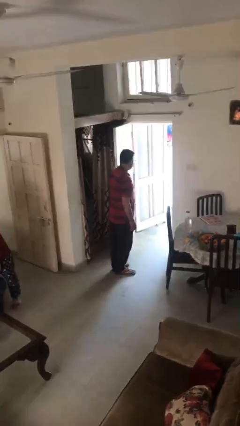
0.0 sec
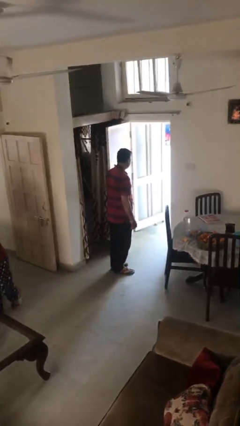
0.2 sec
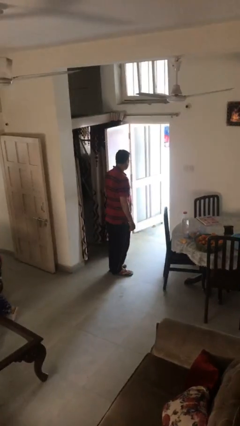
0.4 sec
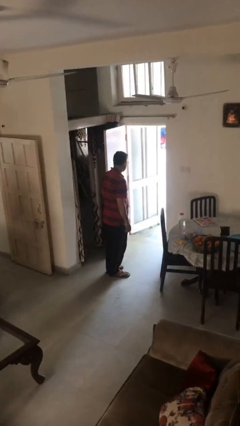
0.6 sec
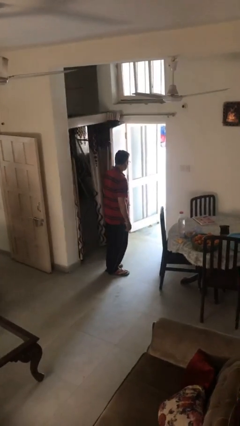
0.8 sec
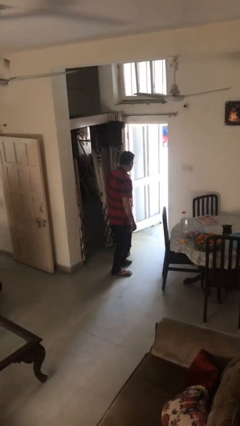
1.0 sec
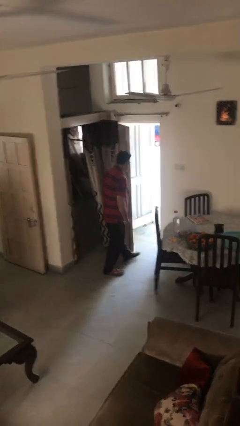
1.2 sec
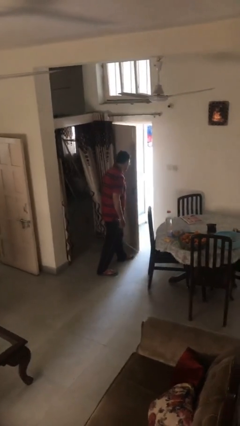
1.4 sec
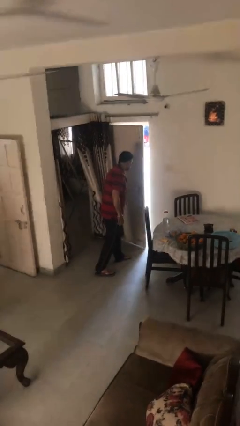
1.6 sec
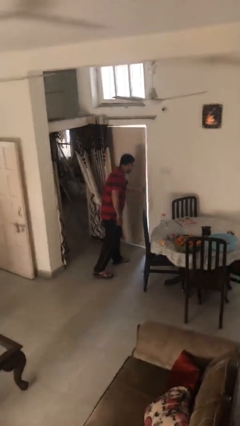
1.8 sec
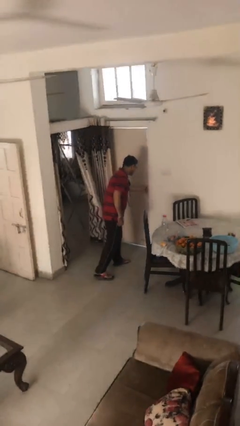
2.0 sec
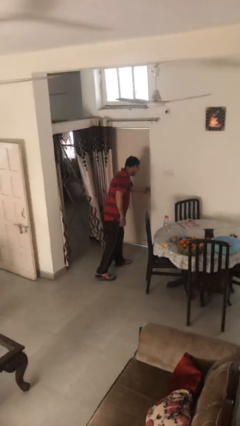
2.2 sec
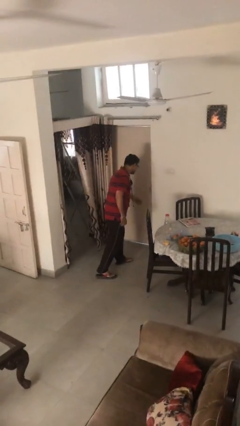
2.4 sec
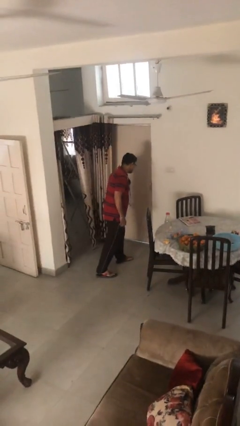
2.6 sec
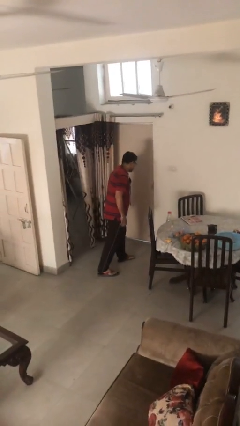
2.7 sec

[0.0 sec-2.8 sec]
person closes facility door

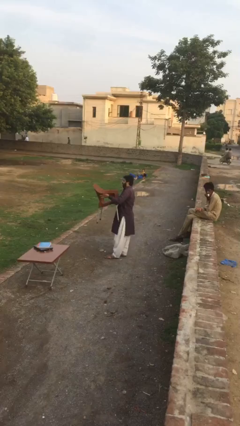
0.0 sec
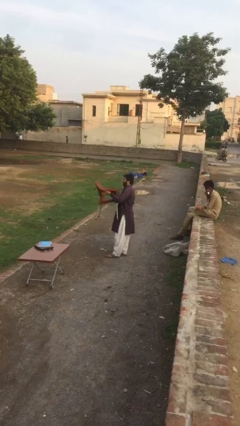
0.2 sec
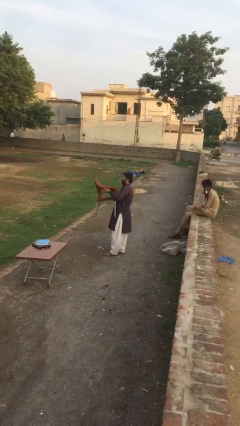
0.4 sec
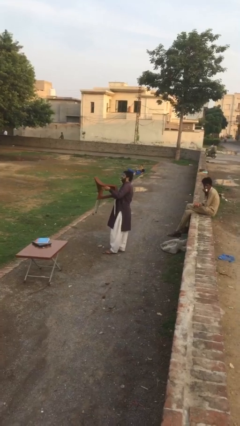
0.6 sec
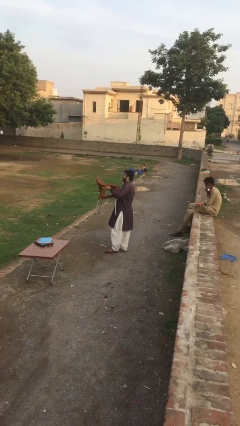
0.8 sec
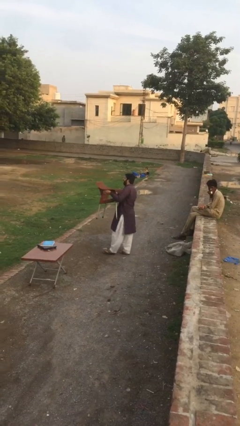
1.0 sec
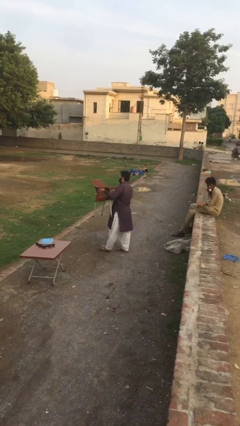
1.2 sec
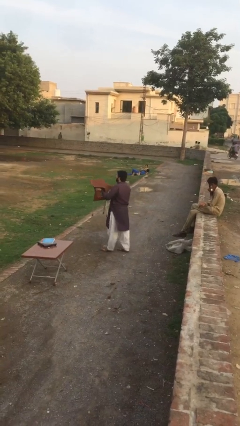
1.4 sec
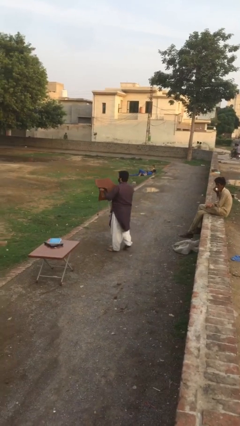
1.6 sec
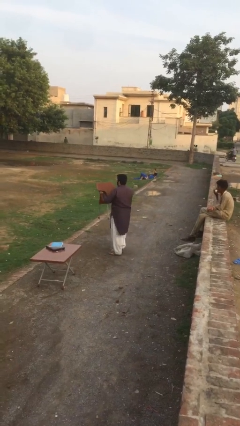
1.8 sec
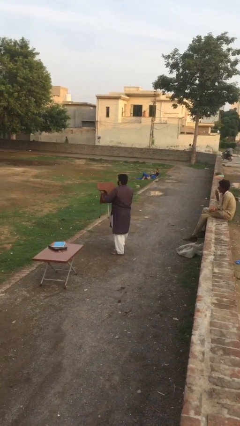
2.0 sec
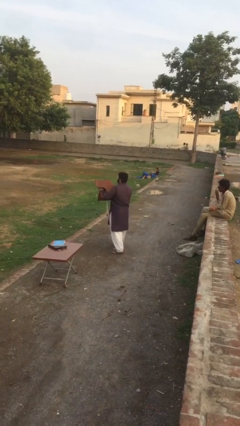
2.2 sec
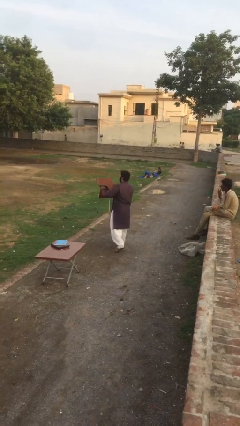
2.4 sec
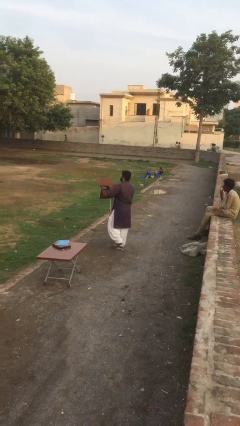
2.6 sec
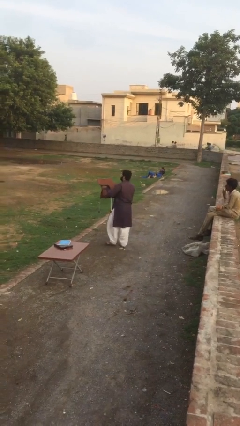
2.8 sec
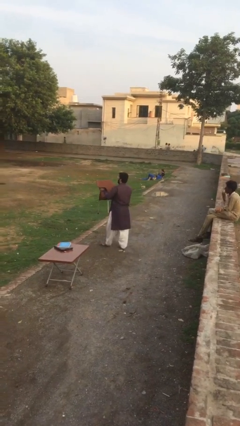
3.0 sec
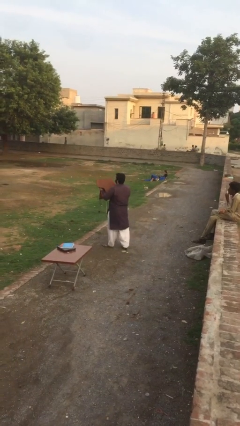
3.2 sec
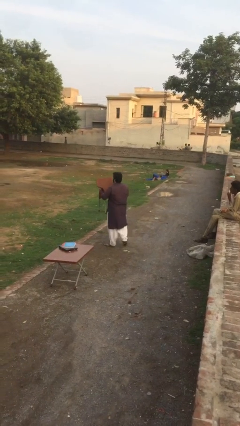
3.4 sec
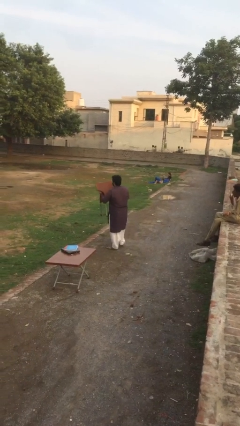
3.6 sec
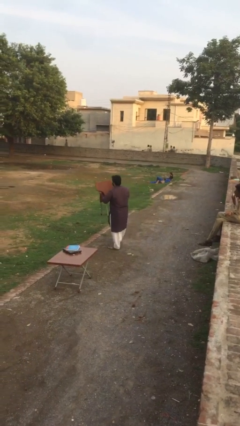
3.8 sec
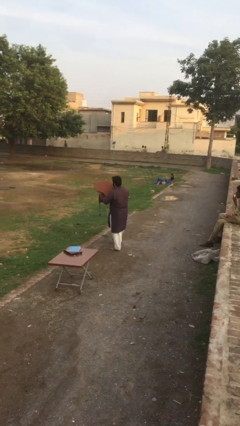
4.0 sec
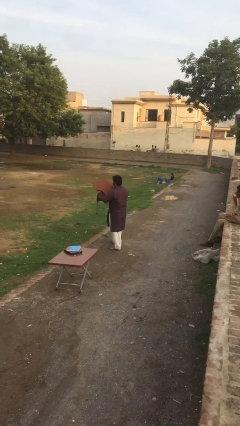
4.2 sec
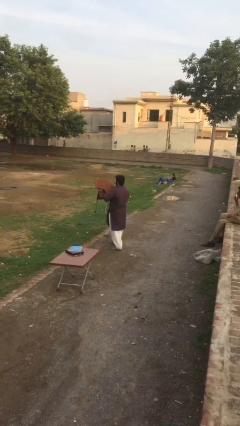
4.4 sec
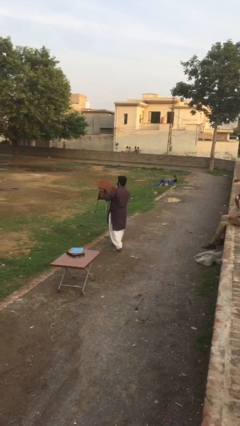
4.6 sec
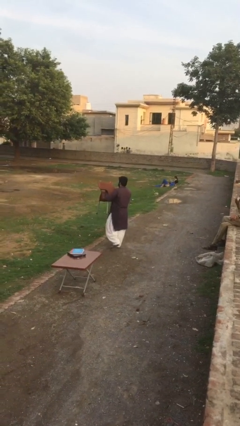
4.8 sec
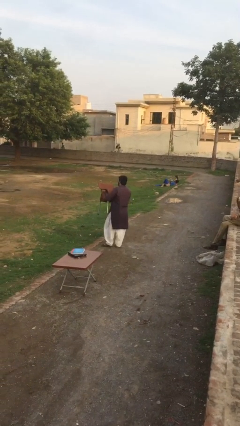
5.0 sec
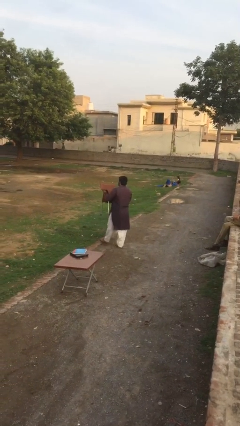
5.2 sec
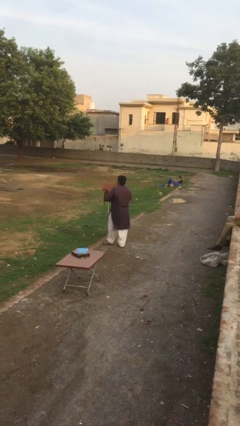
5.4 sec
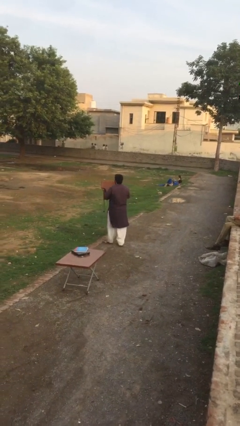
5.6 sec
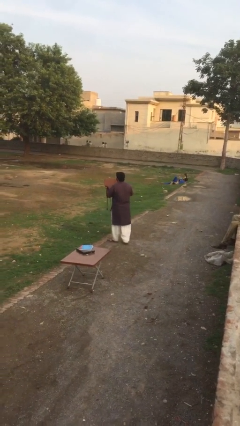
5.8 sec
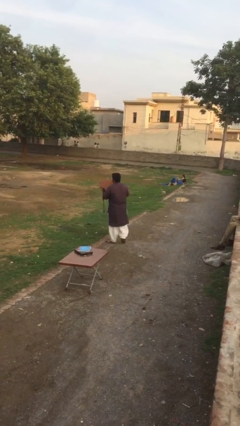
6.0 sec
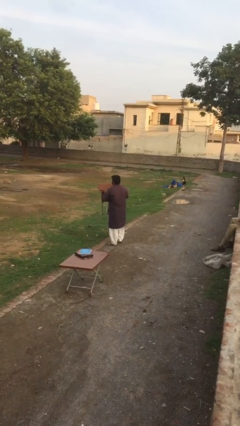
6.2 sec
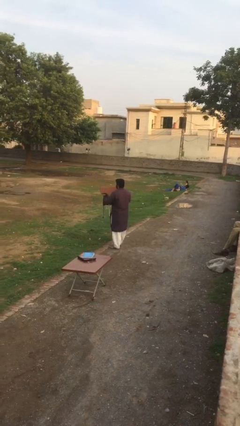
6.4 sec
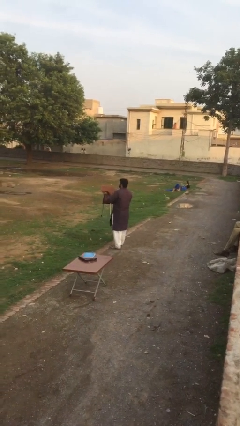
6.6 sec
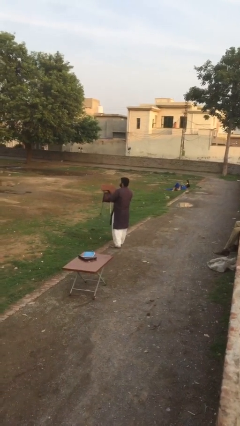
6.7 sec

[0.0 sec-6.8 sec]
person carries heavy object

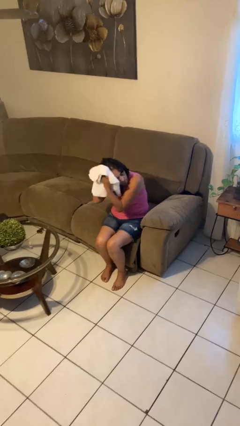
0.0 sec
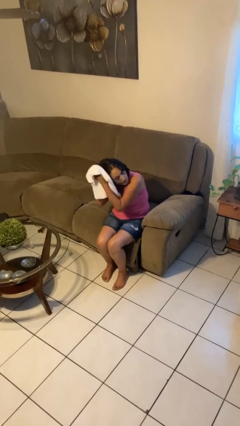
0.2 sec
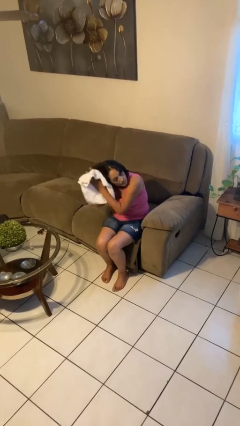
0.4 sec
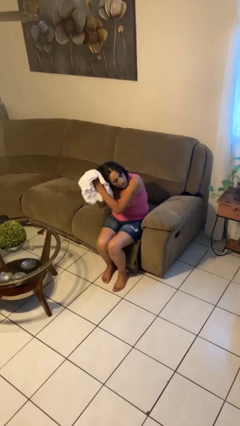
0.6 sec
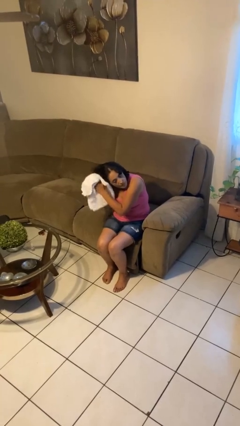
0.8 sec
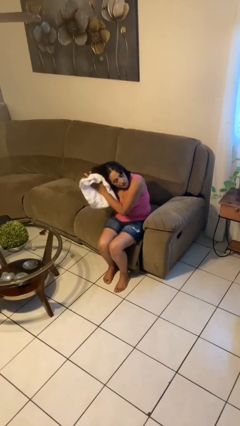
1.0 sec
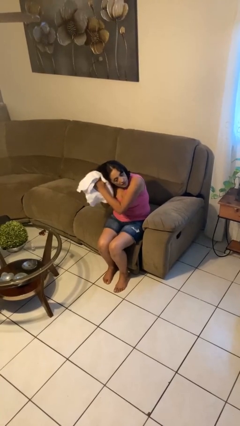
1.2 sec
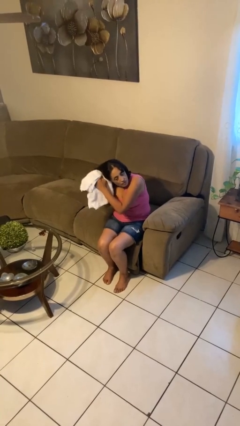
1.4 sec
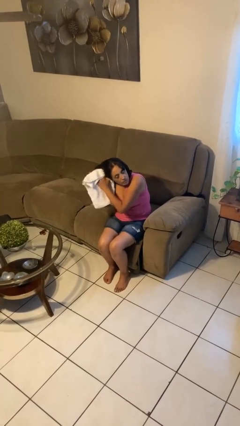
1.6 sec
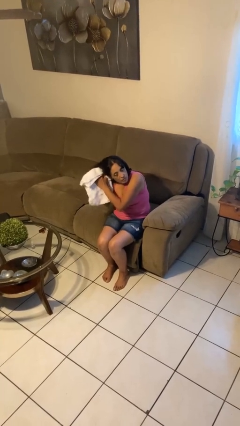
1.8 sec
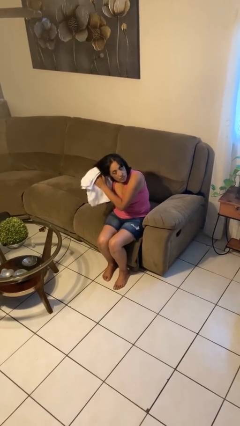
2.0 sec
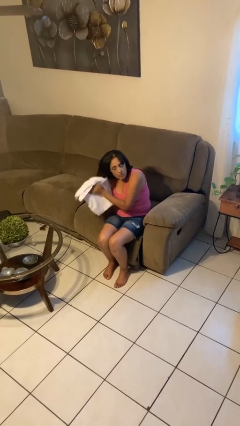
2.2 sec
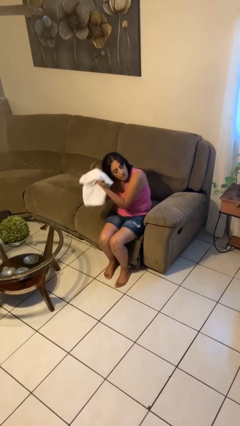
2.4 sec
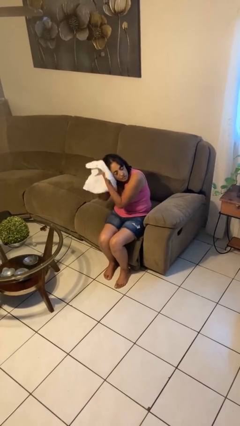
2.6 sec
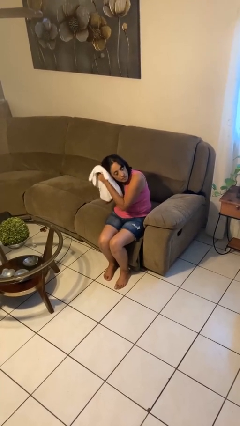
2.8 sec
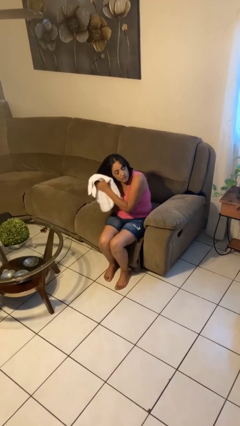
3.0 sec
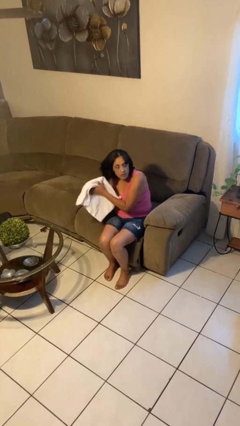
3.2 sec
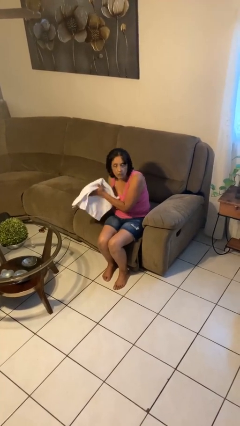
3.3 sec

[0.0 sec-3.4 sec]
person dries hair with towel

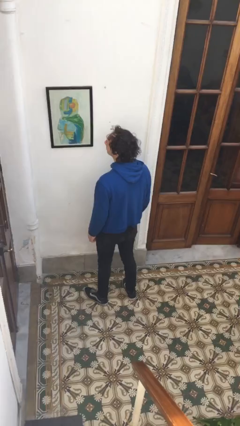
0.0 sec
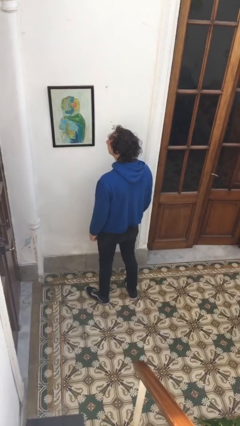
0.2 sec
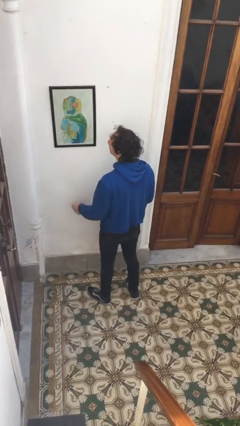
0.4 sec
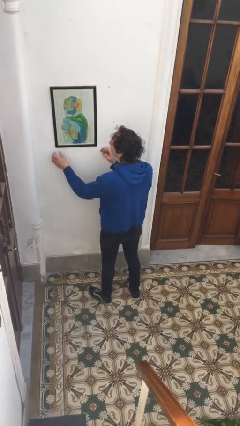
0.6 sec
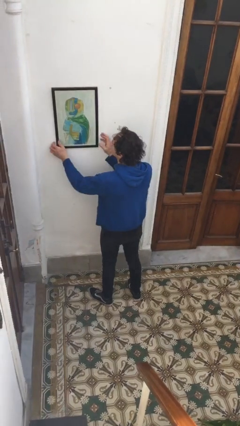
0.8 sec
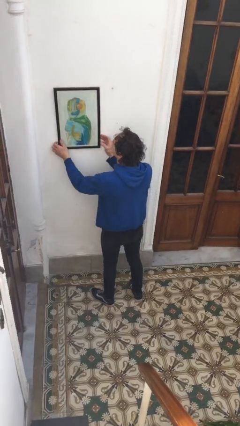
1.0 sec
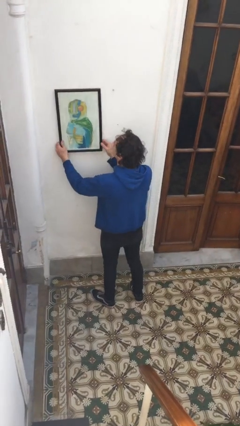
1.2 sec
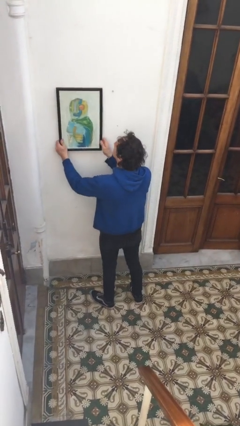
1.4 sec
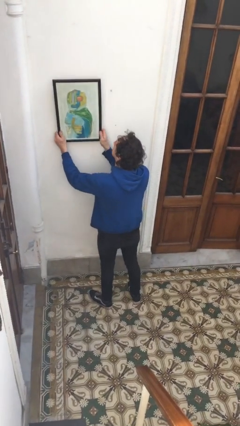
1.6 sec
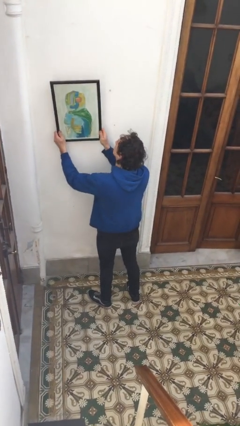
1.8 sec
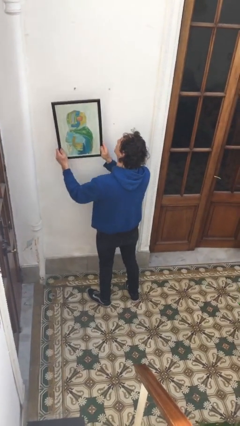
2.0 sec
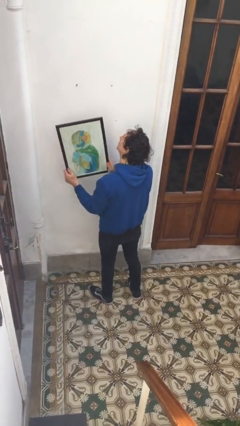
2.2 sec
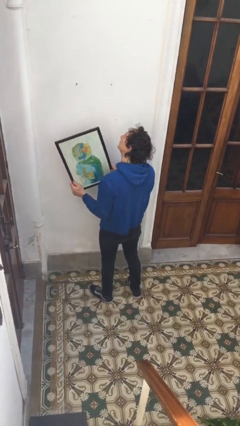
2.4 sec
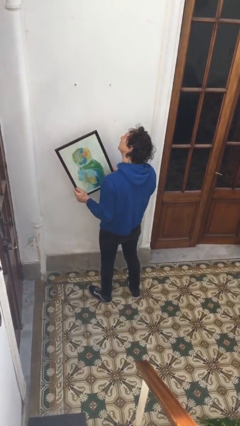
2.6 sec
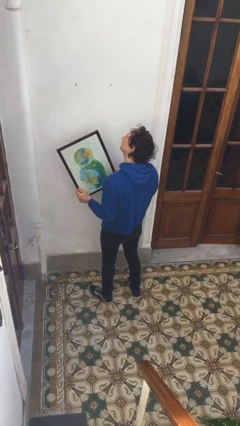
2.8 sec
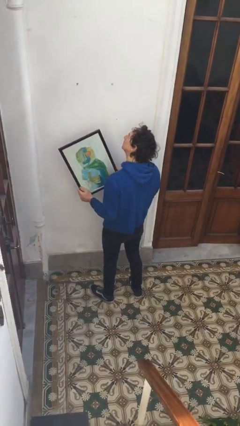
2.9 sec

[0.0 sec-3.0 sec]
person takes down picture frame

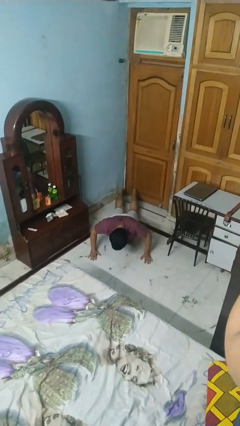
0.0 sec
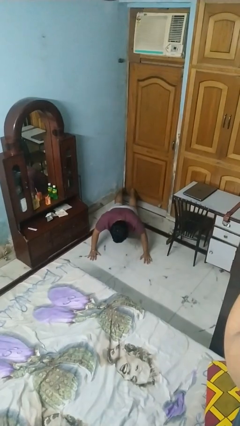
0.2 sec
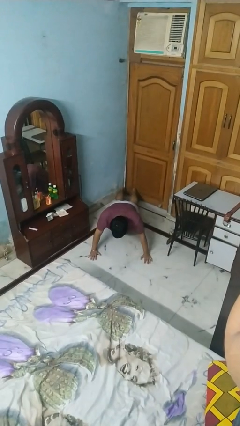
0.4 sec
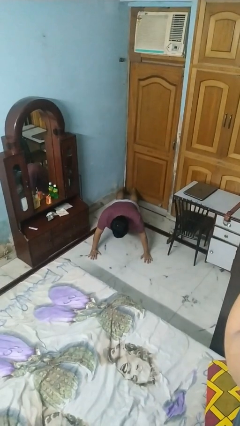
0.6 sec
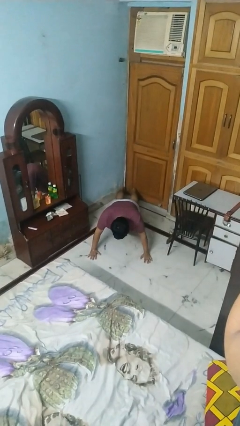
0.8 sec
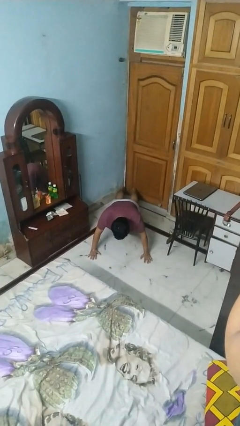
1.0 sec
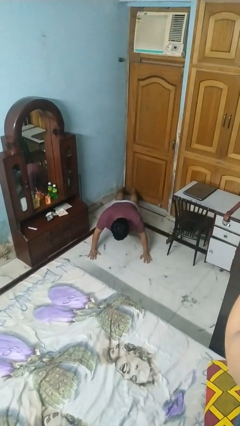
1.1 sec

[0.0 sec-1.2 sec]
person exercises with pushup

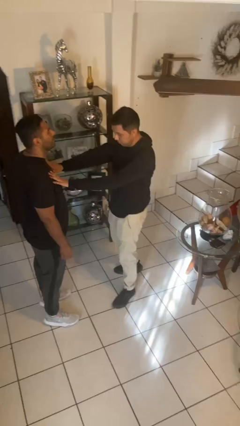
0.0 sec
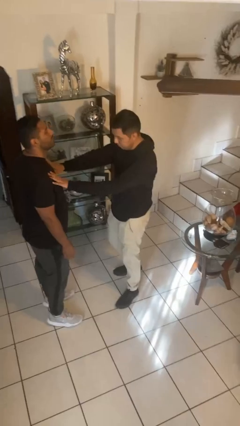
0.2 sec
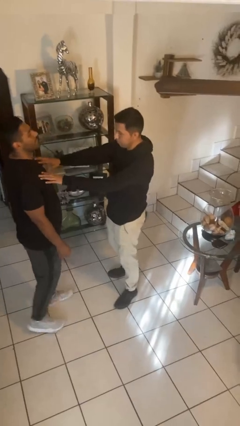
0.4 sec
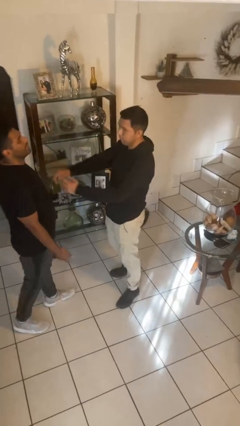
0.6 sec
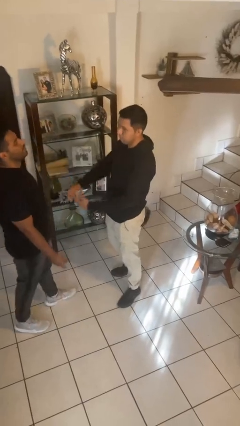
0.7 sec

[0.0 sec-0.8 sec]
person shoves person
